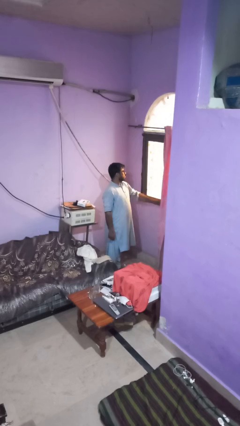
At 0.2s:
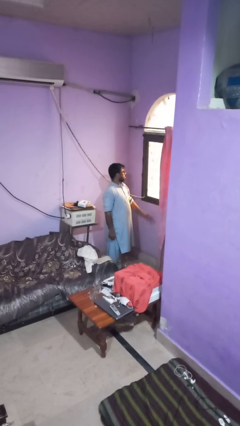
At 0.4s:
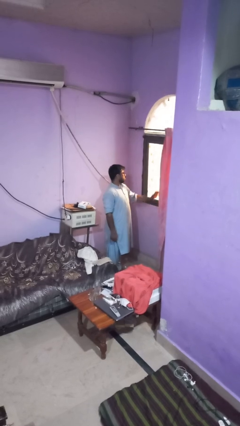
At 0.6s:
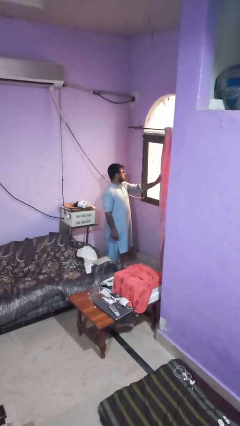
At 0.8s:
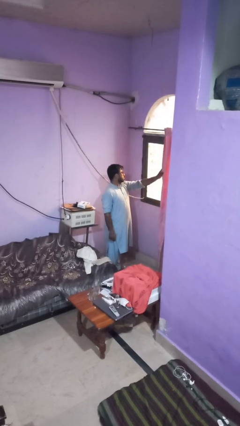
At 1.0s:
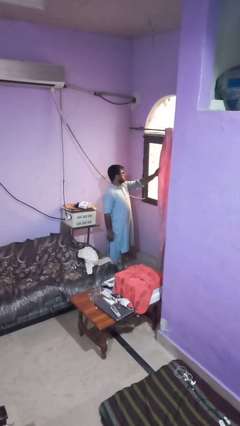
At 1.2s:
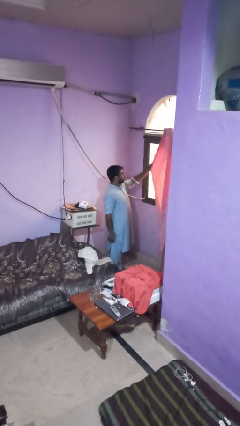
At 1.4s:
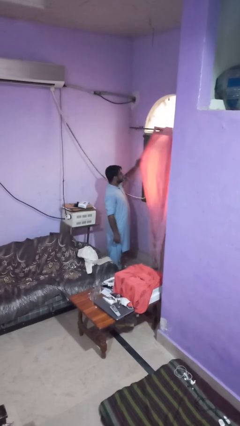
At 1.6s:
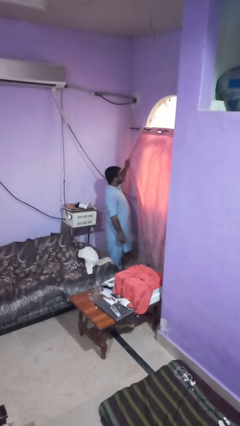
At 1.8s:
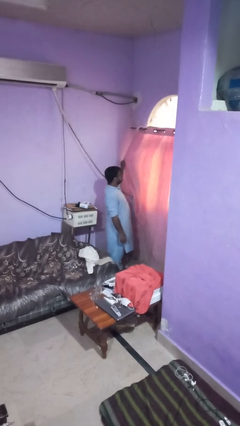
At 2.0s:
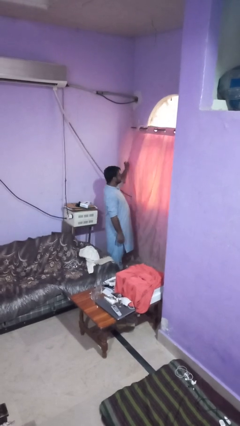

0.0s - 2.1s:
person closes curtains

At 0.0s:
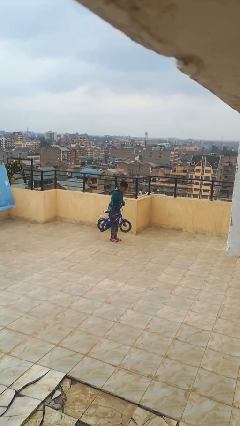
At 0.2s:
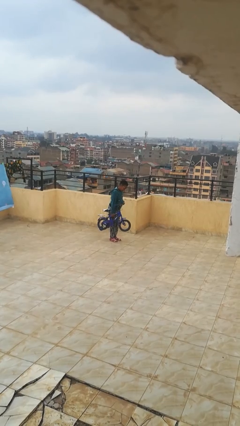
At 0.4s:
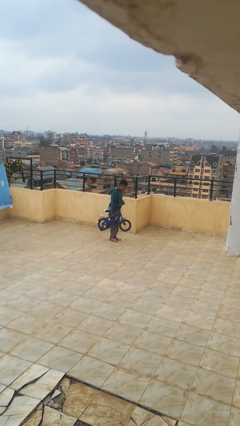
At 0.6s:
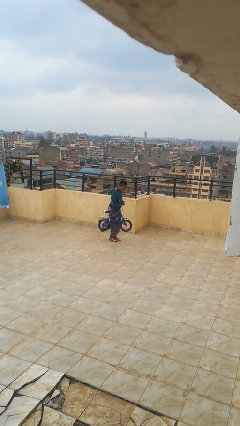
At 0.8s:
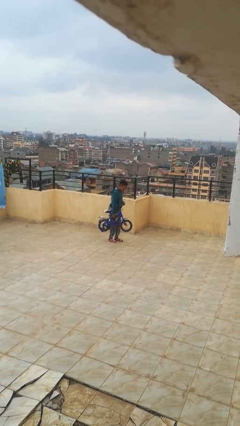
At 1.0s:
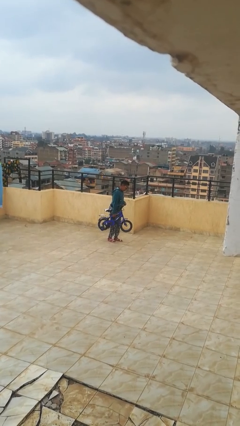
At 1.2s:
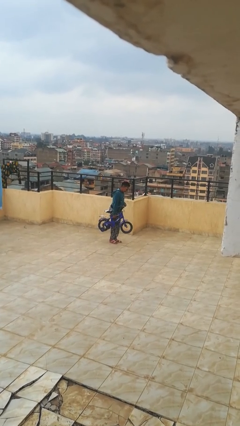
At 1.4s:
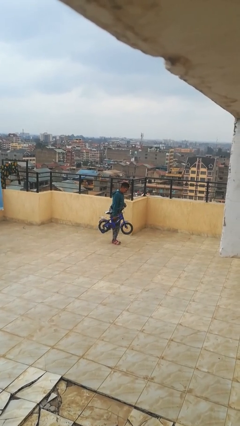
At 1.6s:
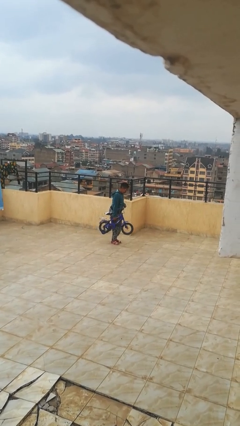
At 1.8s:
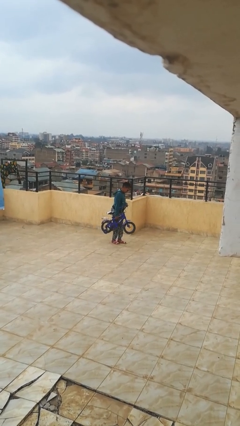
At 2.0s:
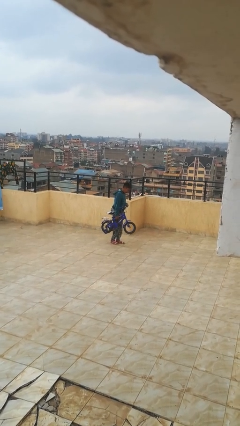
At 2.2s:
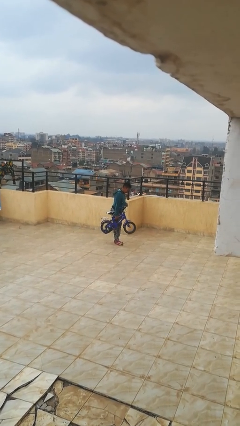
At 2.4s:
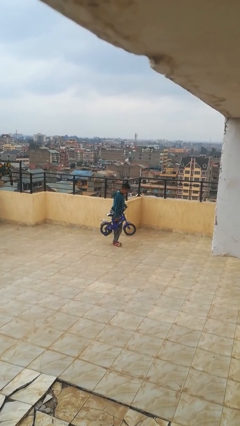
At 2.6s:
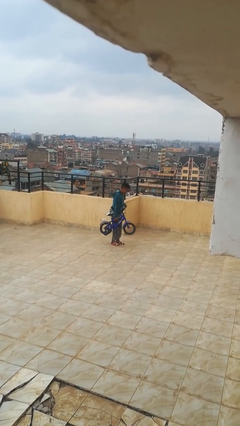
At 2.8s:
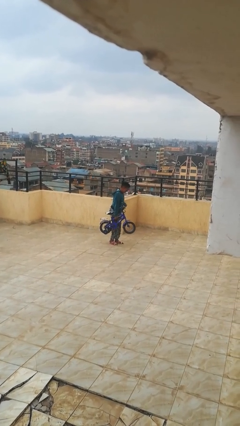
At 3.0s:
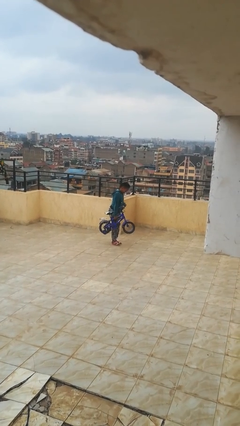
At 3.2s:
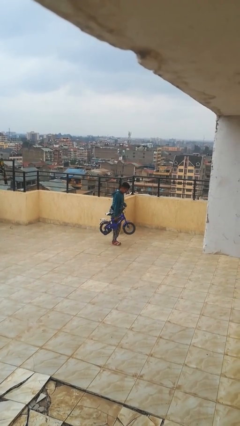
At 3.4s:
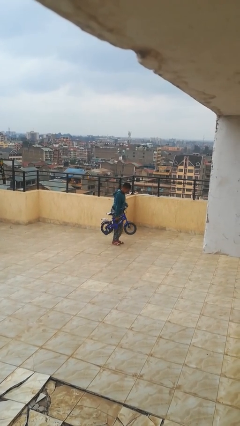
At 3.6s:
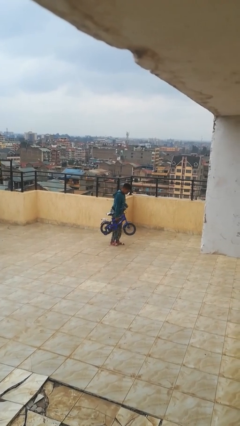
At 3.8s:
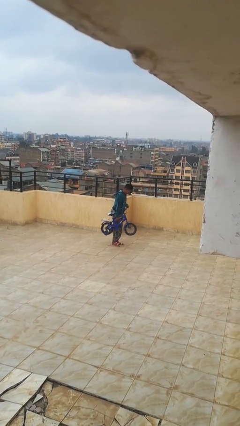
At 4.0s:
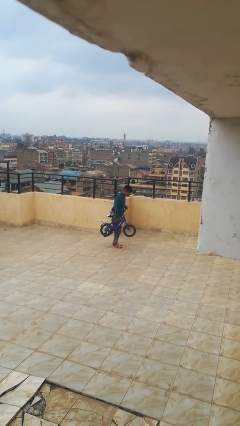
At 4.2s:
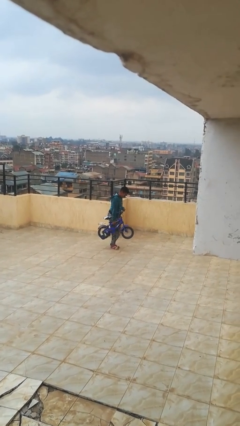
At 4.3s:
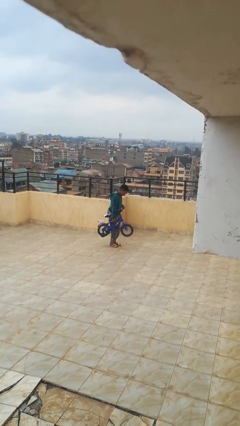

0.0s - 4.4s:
person carries bicycle

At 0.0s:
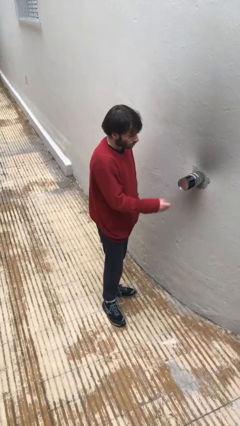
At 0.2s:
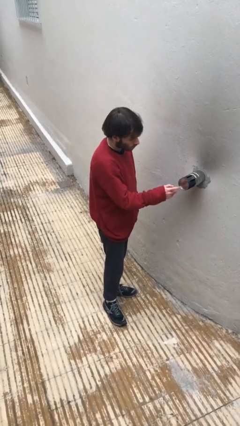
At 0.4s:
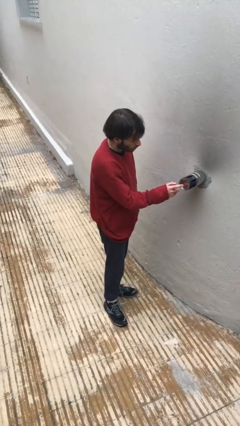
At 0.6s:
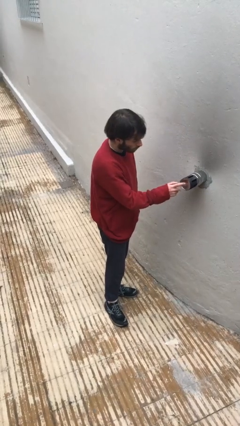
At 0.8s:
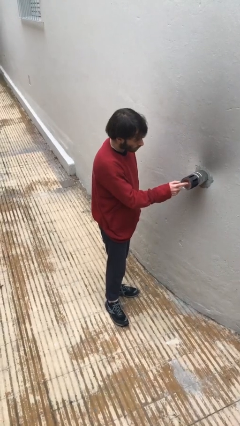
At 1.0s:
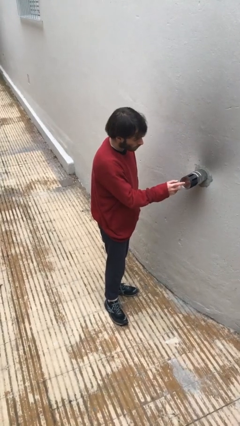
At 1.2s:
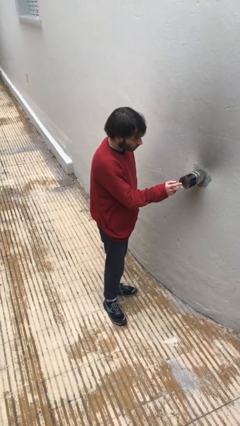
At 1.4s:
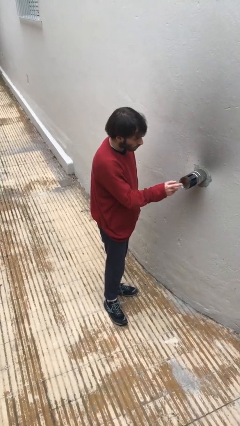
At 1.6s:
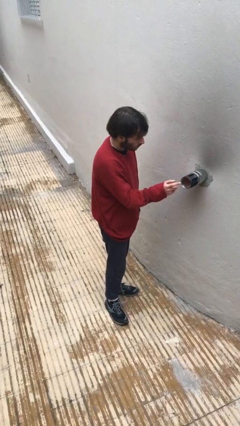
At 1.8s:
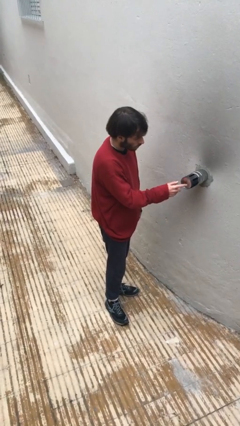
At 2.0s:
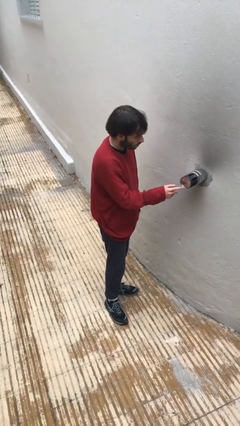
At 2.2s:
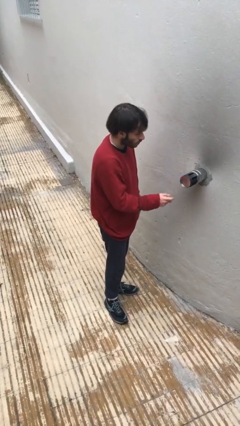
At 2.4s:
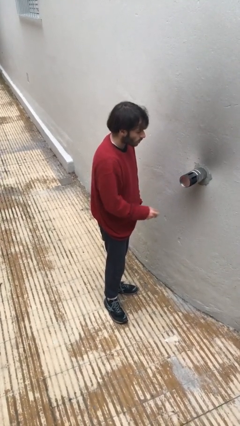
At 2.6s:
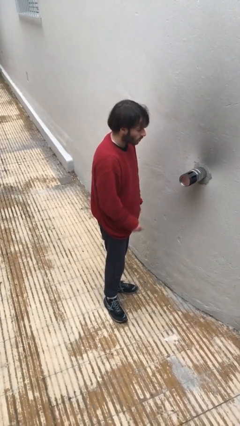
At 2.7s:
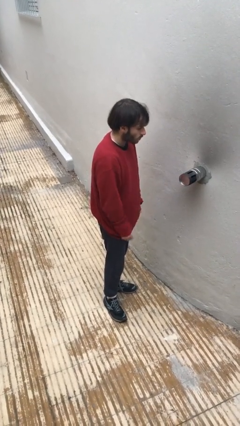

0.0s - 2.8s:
person taps object with finger

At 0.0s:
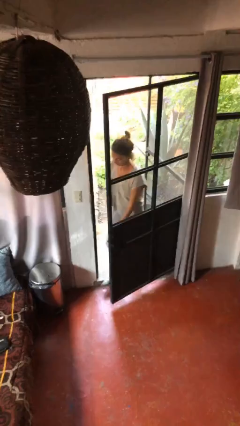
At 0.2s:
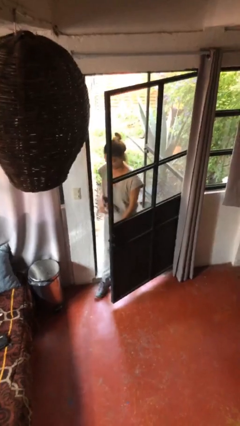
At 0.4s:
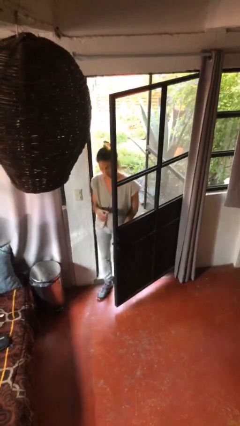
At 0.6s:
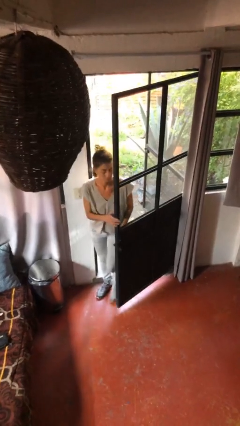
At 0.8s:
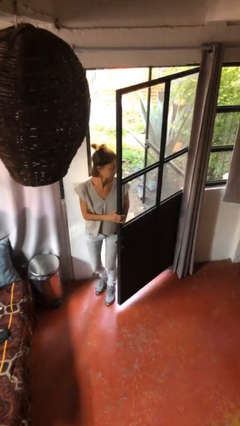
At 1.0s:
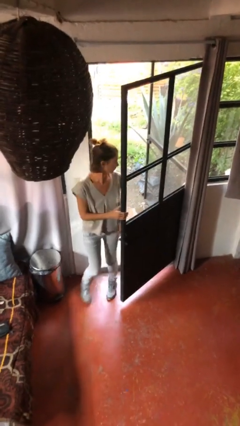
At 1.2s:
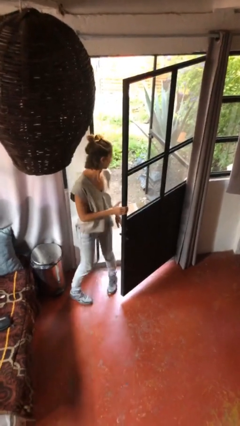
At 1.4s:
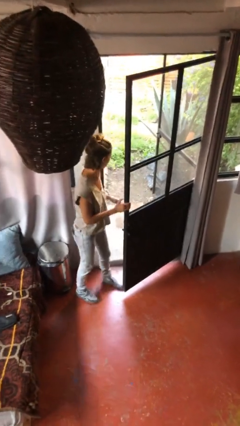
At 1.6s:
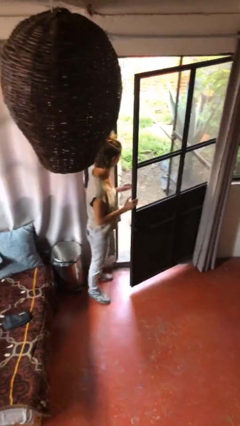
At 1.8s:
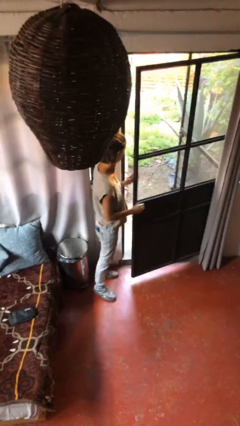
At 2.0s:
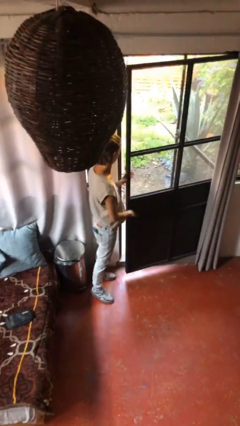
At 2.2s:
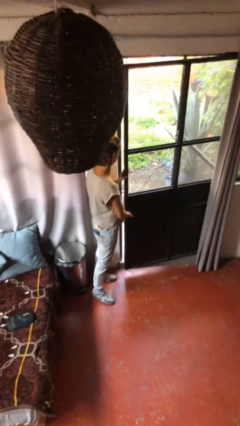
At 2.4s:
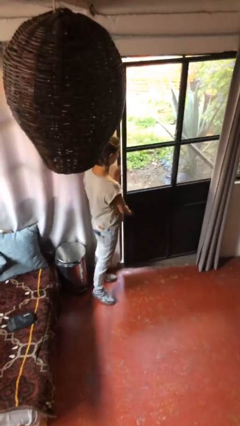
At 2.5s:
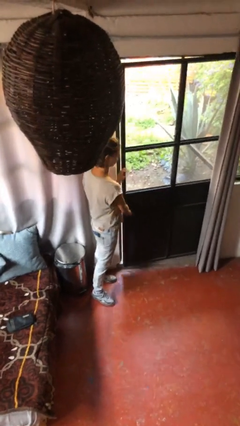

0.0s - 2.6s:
person enters scene through structure

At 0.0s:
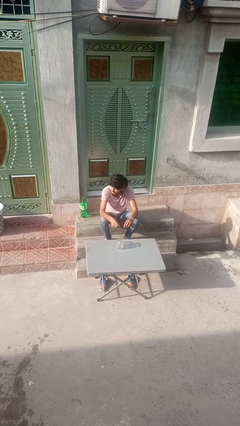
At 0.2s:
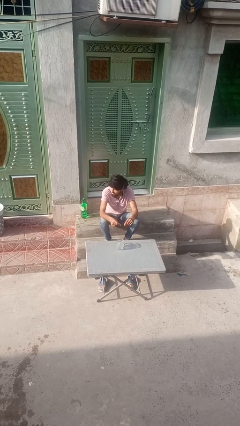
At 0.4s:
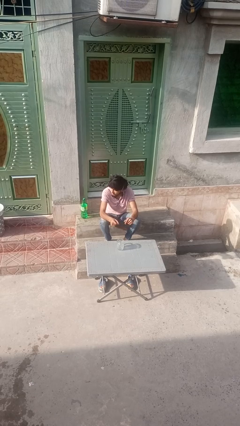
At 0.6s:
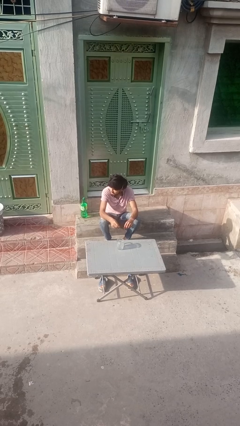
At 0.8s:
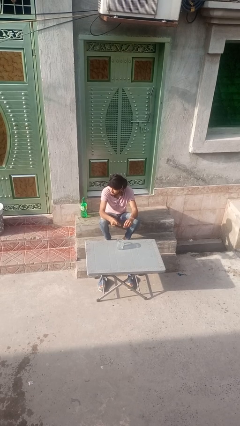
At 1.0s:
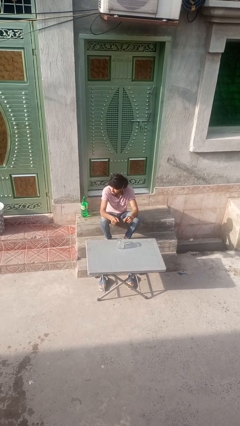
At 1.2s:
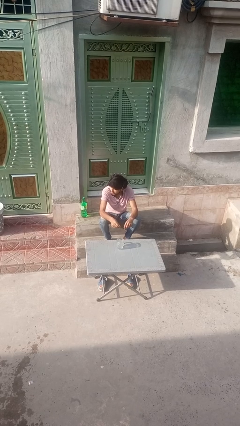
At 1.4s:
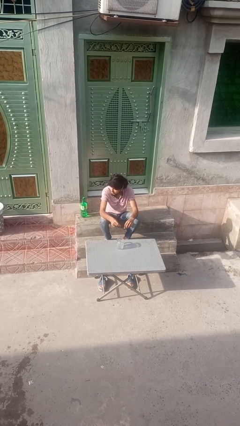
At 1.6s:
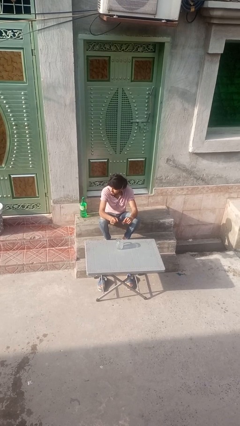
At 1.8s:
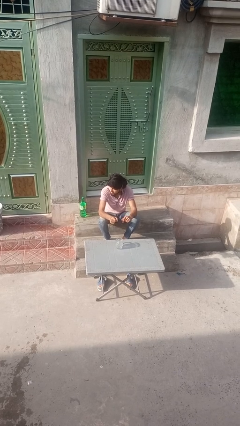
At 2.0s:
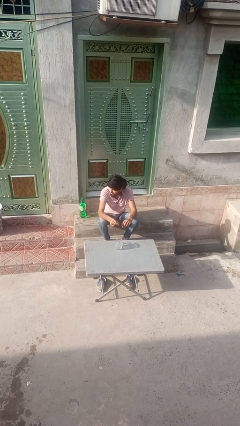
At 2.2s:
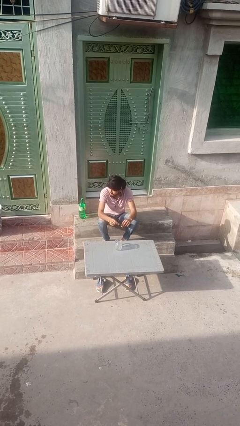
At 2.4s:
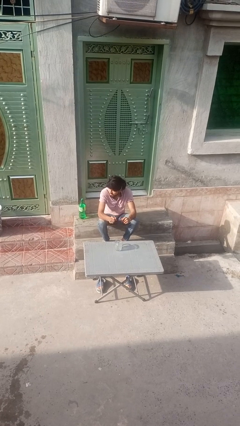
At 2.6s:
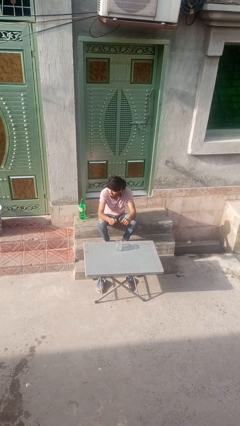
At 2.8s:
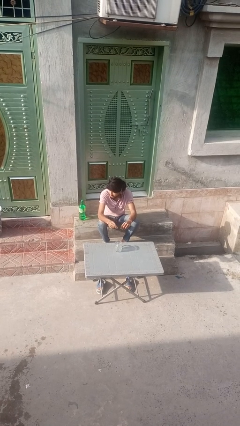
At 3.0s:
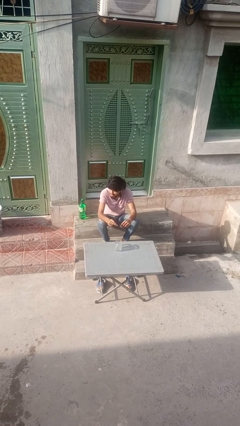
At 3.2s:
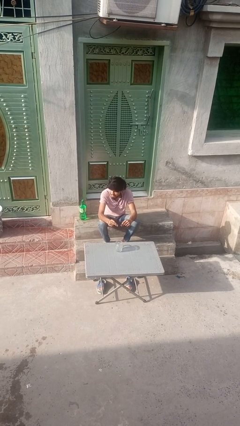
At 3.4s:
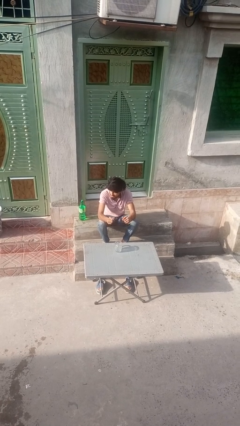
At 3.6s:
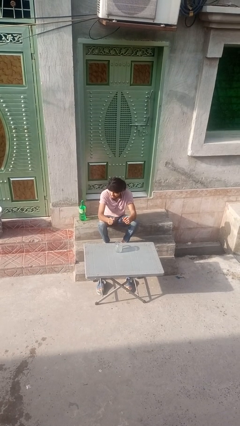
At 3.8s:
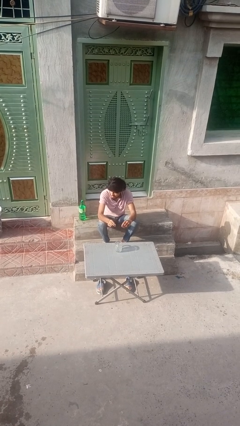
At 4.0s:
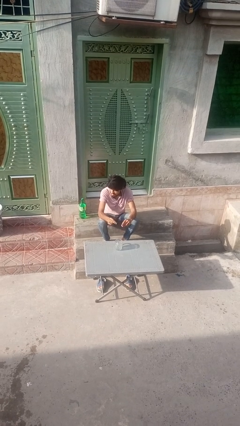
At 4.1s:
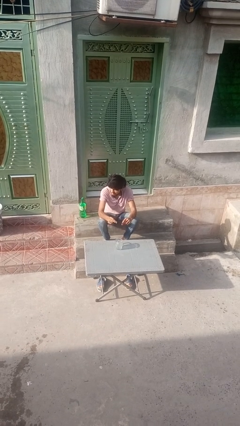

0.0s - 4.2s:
person snaps fingers

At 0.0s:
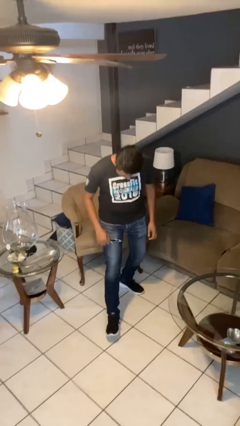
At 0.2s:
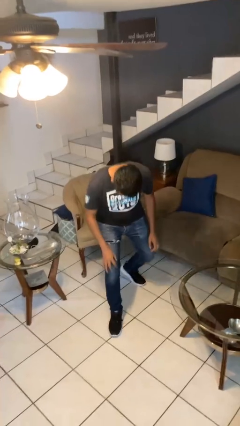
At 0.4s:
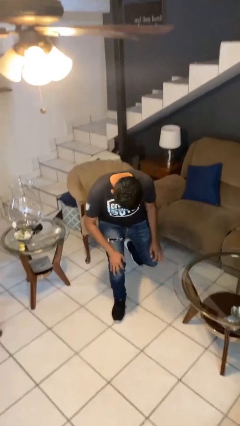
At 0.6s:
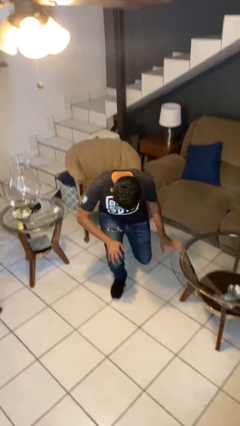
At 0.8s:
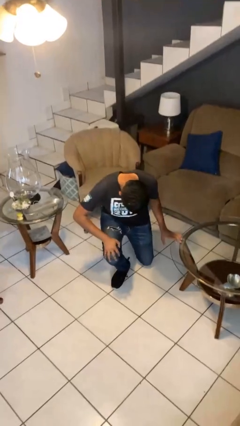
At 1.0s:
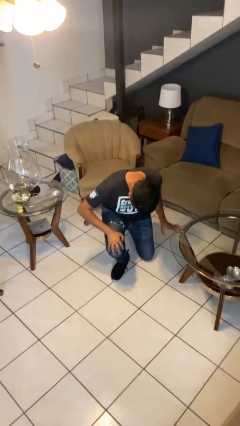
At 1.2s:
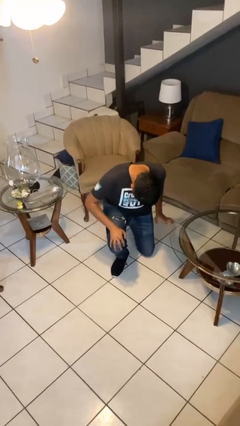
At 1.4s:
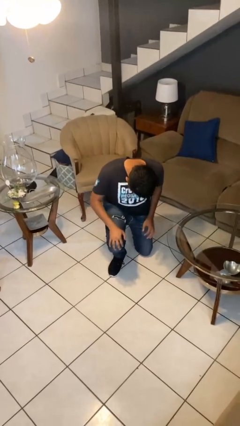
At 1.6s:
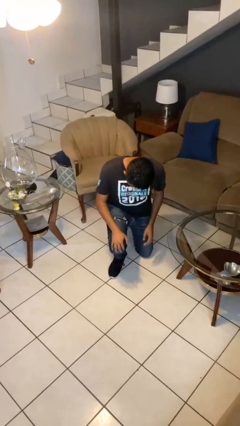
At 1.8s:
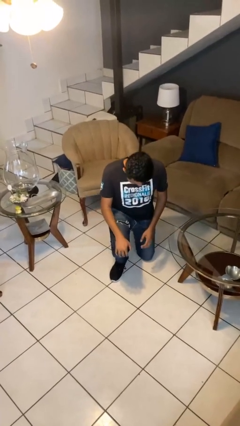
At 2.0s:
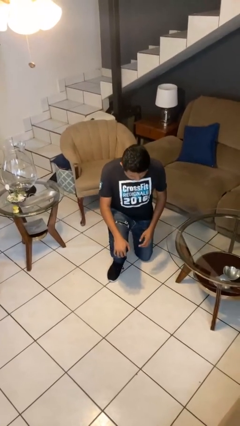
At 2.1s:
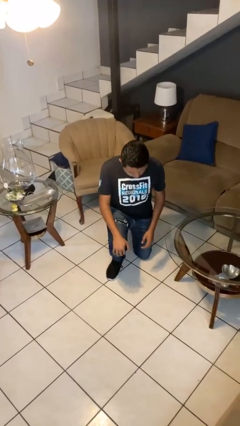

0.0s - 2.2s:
person kneels
